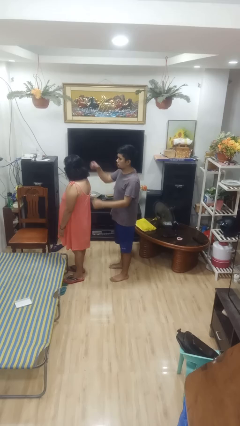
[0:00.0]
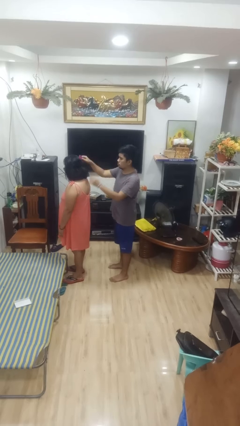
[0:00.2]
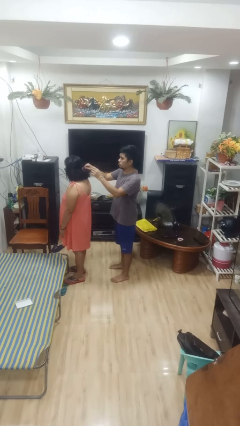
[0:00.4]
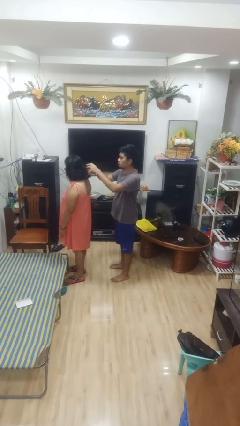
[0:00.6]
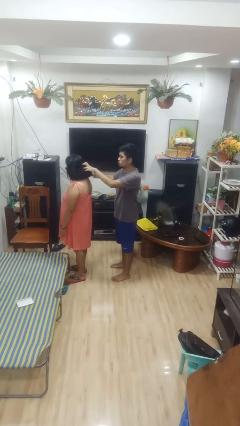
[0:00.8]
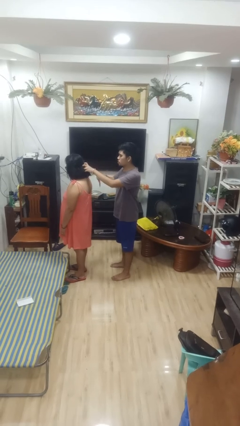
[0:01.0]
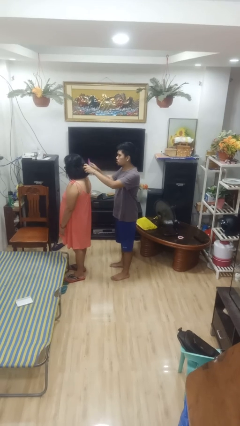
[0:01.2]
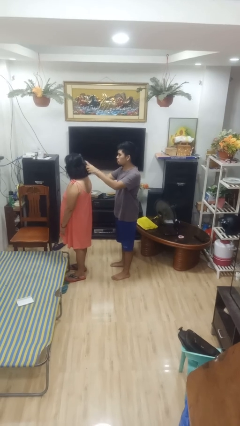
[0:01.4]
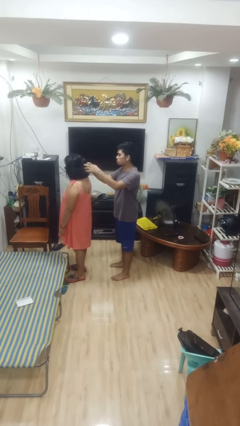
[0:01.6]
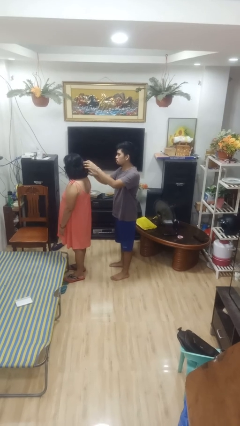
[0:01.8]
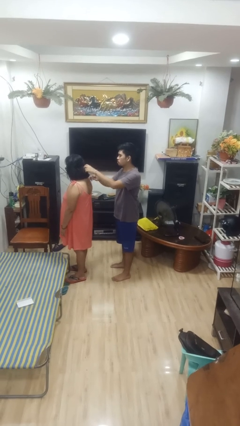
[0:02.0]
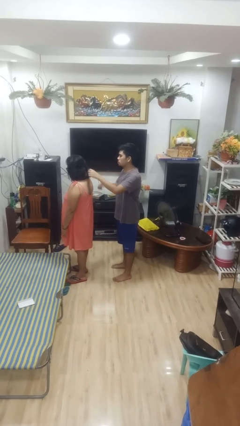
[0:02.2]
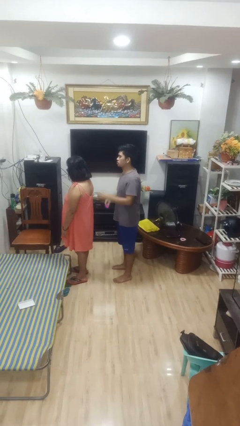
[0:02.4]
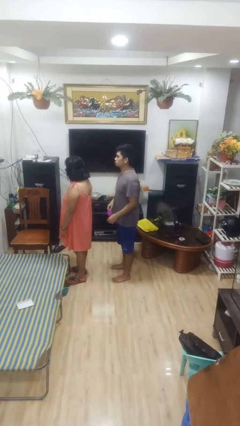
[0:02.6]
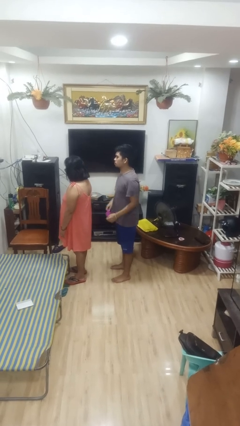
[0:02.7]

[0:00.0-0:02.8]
person brushes hair of person

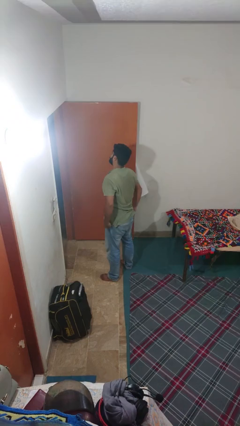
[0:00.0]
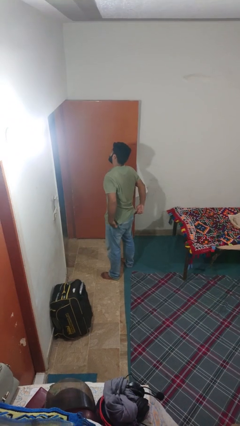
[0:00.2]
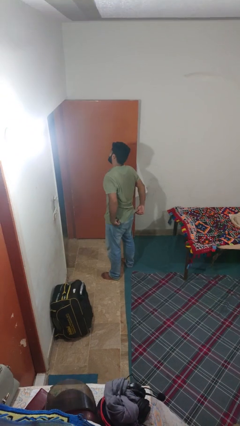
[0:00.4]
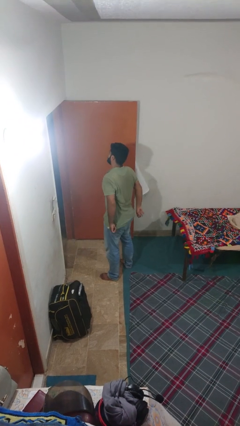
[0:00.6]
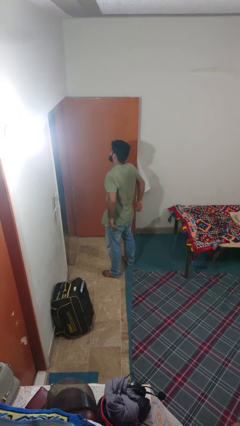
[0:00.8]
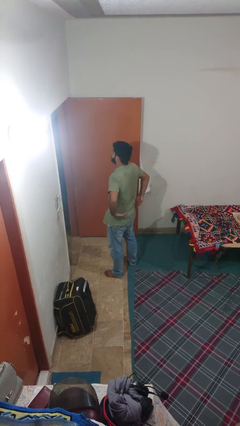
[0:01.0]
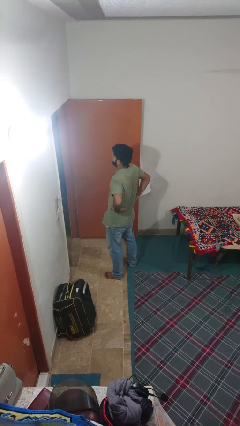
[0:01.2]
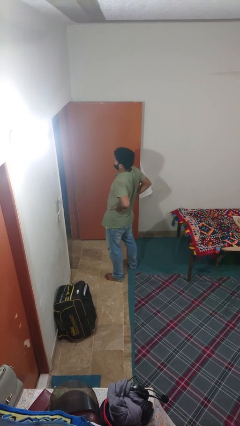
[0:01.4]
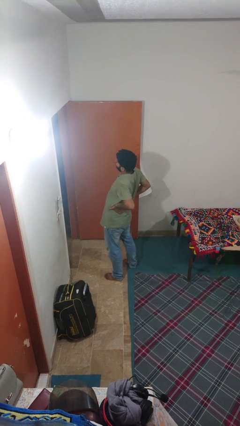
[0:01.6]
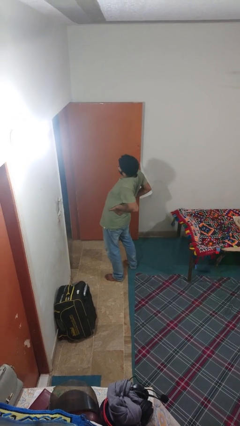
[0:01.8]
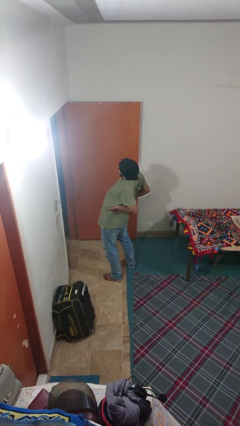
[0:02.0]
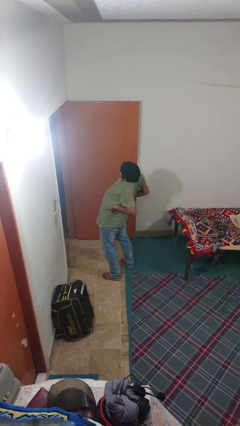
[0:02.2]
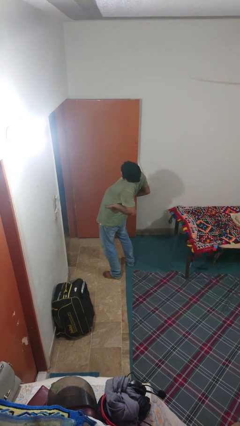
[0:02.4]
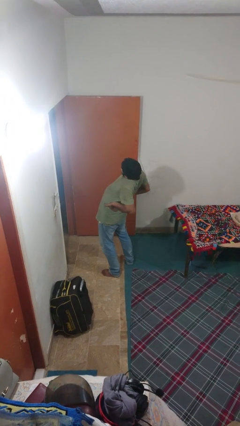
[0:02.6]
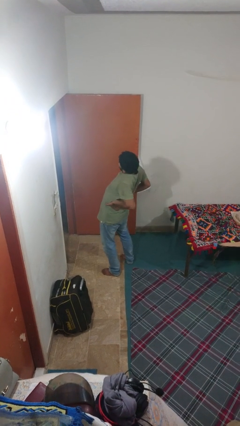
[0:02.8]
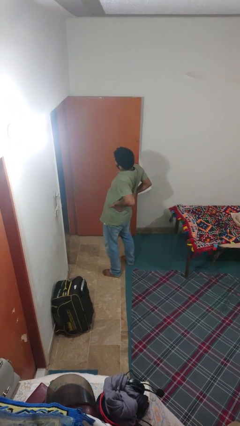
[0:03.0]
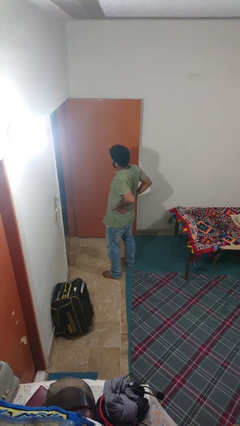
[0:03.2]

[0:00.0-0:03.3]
person stretches back

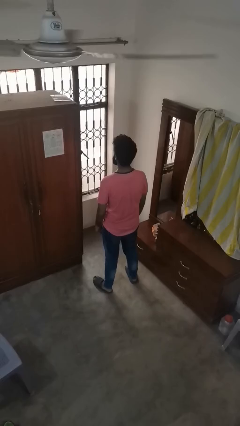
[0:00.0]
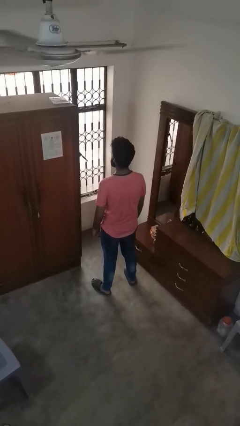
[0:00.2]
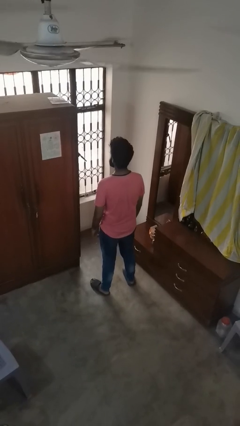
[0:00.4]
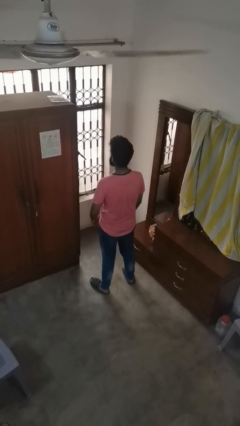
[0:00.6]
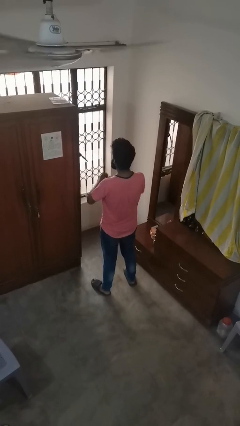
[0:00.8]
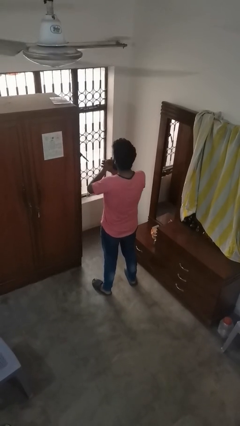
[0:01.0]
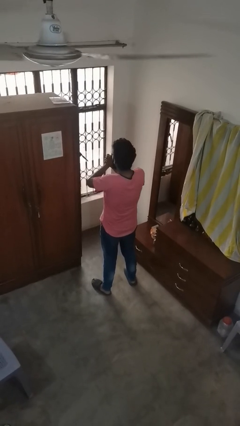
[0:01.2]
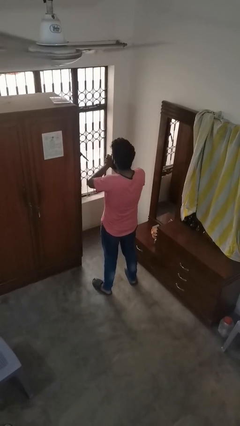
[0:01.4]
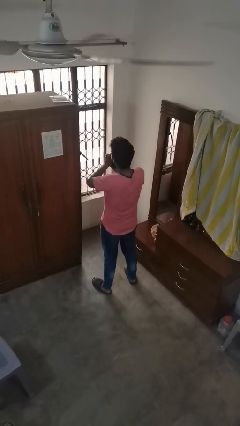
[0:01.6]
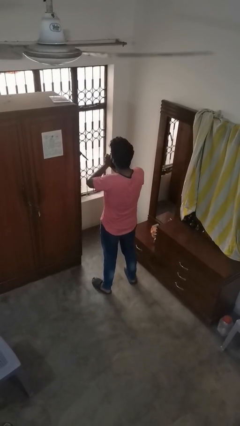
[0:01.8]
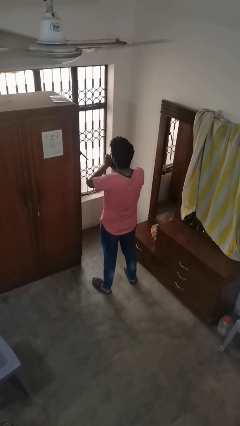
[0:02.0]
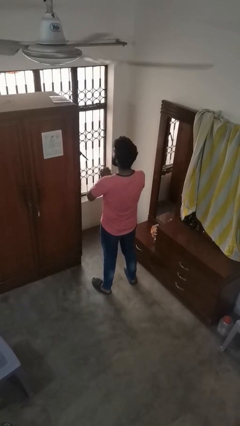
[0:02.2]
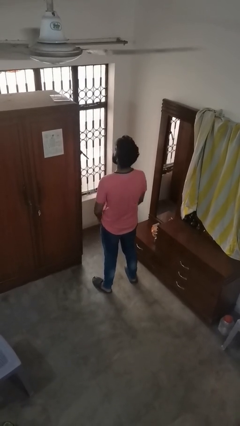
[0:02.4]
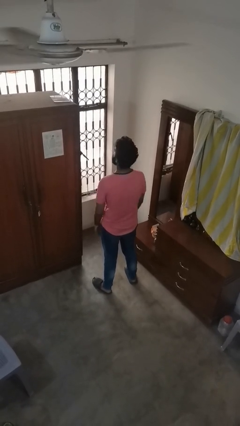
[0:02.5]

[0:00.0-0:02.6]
person blows into hands

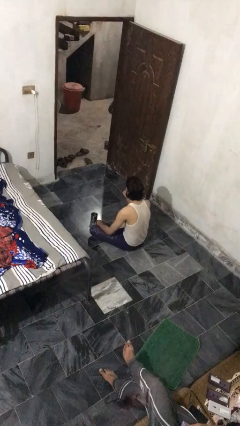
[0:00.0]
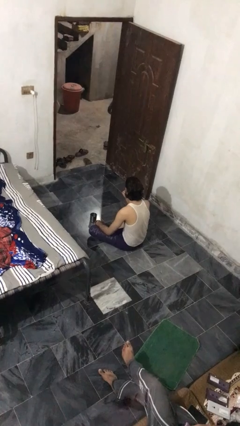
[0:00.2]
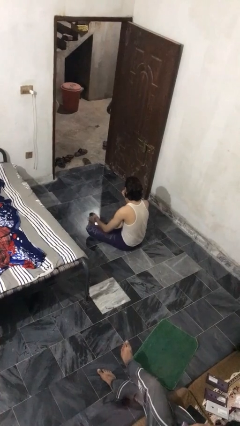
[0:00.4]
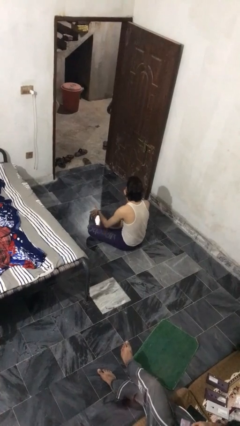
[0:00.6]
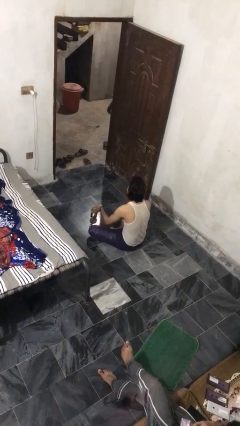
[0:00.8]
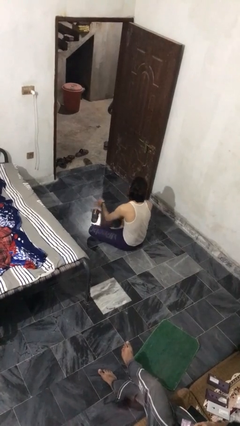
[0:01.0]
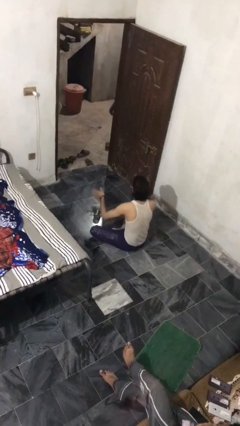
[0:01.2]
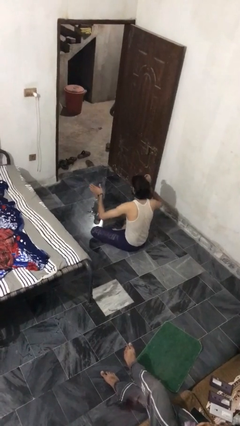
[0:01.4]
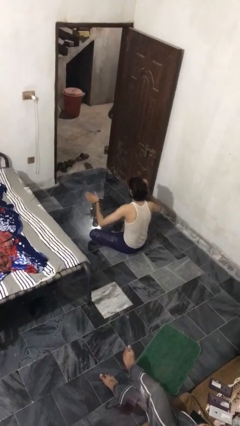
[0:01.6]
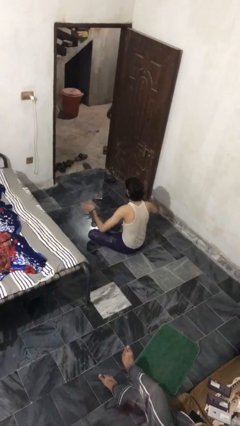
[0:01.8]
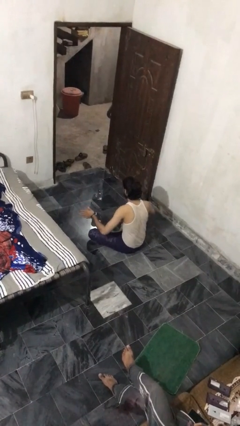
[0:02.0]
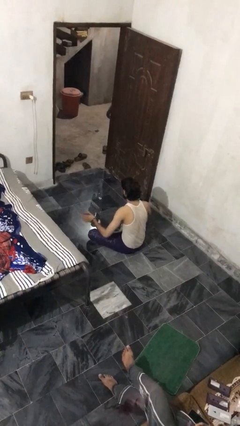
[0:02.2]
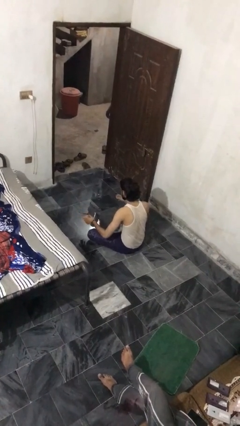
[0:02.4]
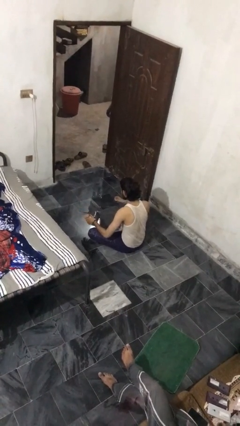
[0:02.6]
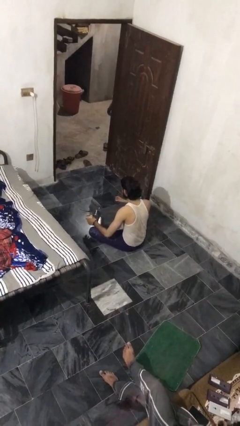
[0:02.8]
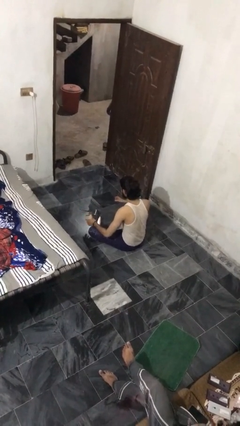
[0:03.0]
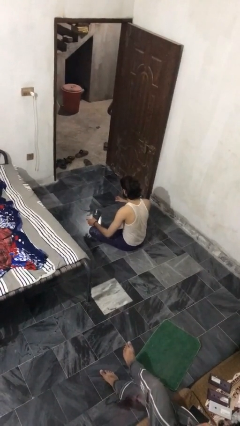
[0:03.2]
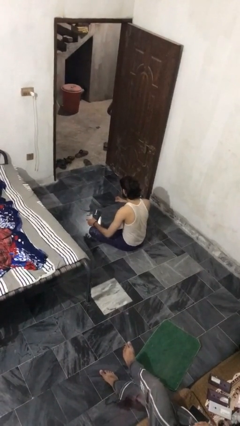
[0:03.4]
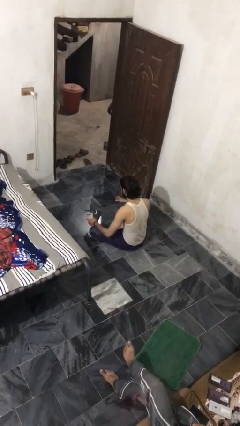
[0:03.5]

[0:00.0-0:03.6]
person spills on floor

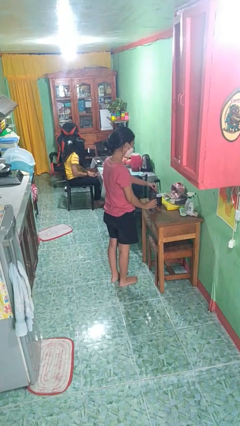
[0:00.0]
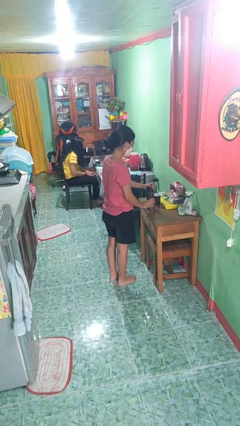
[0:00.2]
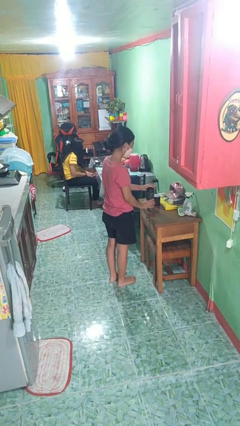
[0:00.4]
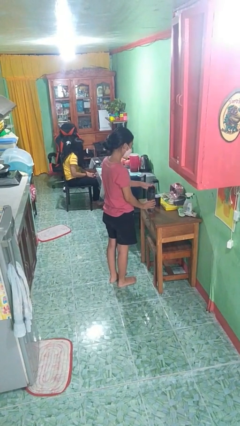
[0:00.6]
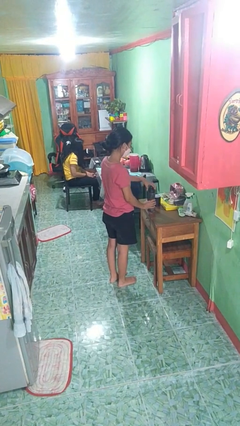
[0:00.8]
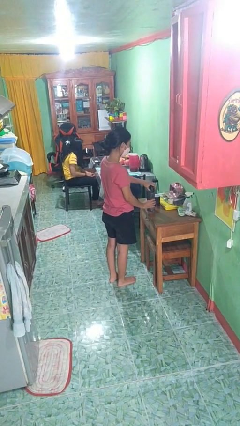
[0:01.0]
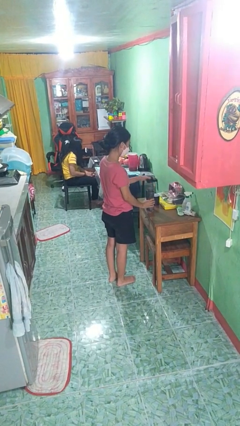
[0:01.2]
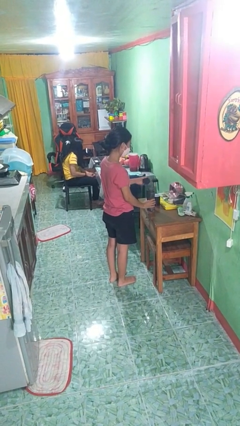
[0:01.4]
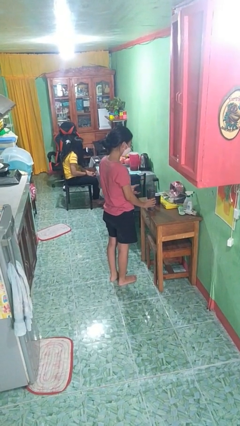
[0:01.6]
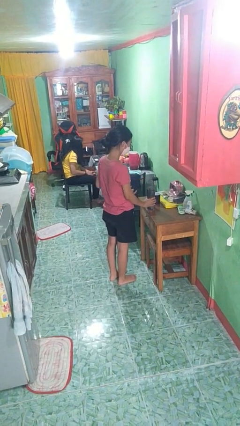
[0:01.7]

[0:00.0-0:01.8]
person unscrews lid from bottle

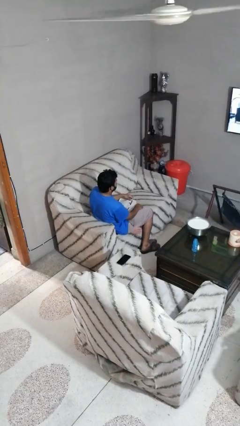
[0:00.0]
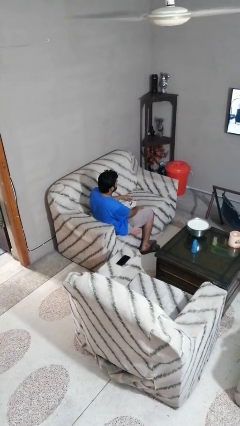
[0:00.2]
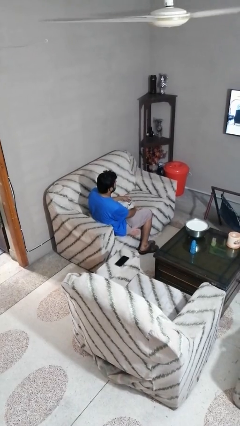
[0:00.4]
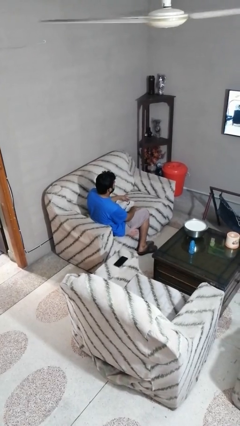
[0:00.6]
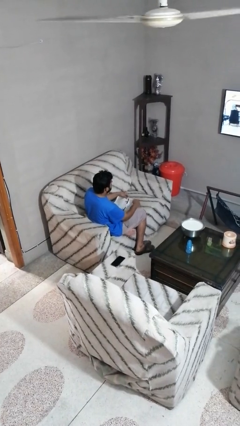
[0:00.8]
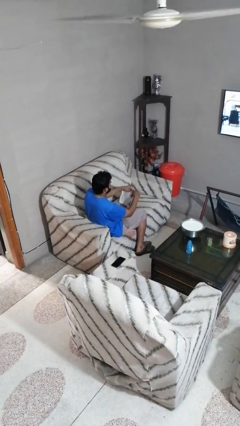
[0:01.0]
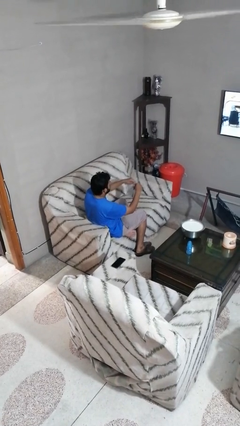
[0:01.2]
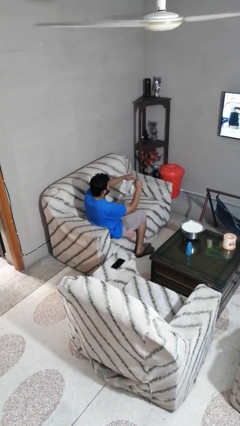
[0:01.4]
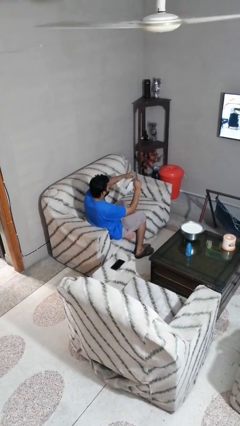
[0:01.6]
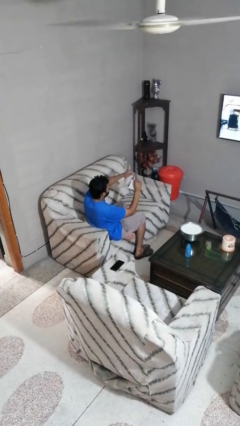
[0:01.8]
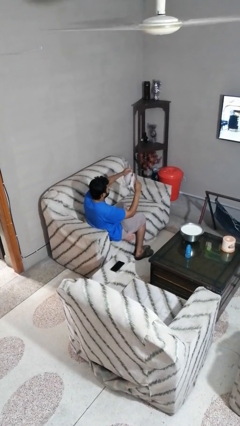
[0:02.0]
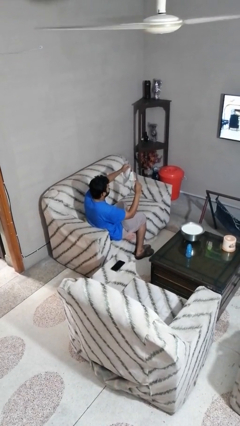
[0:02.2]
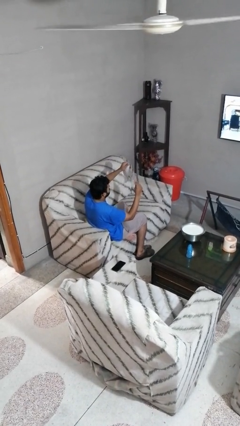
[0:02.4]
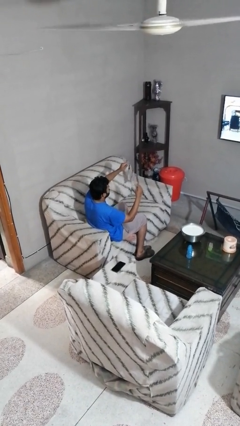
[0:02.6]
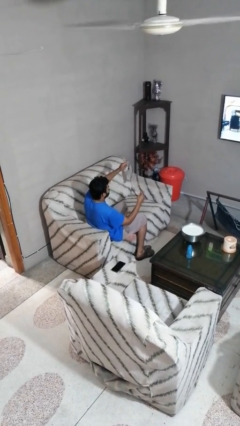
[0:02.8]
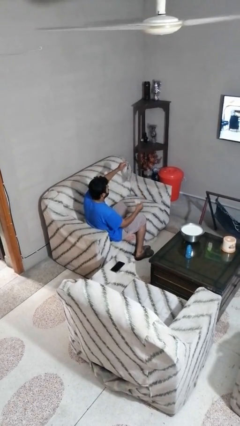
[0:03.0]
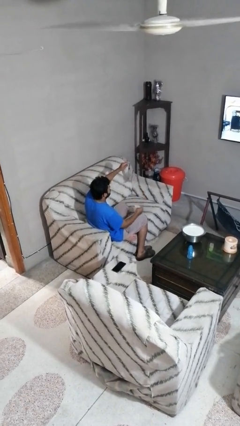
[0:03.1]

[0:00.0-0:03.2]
person tears paper
